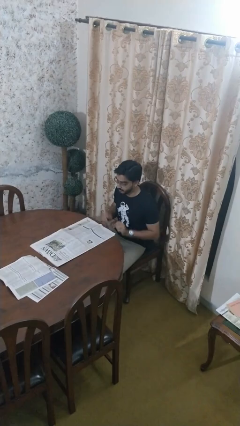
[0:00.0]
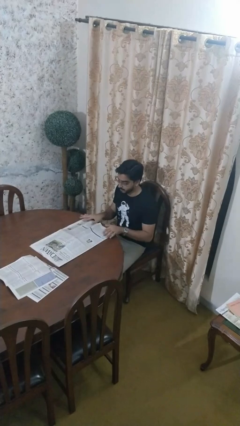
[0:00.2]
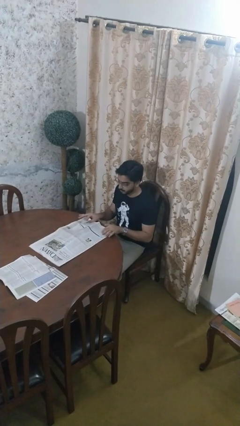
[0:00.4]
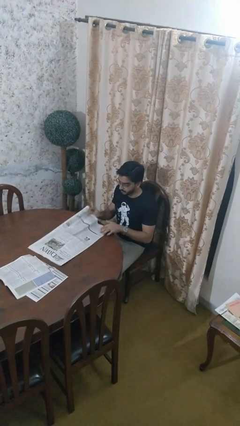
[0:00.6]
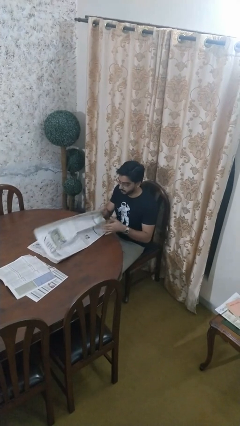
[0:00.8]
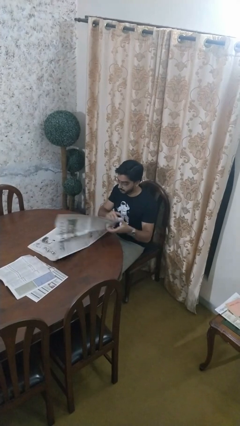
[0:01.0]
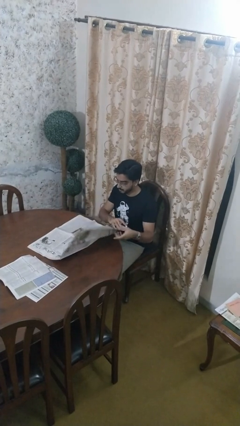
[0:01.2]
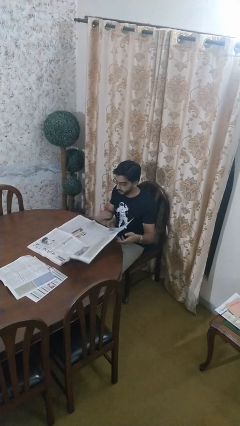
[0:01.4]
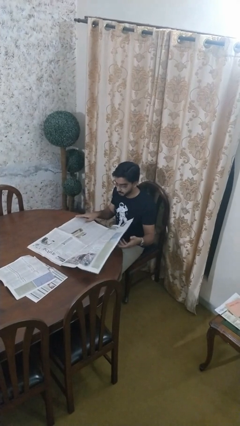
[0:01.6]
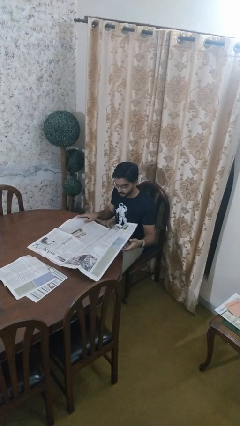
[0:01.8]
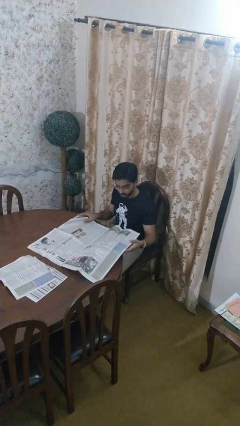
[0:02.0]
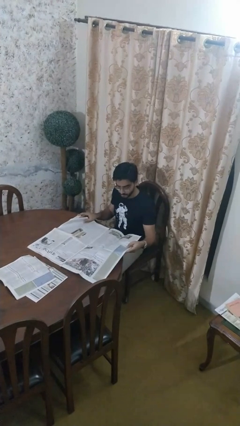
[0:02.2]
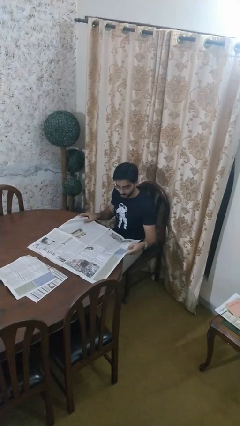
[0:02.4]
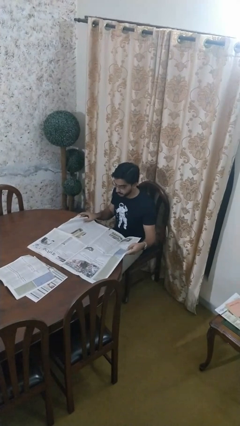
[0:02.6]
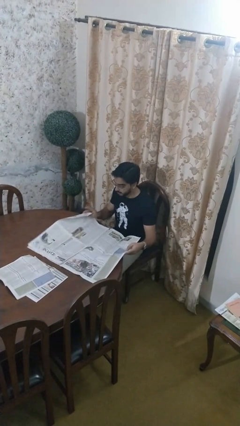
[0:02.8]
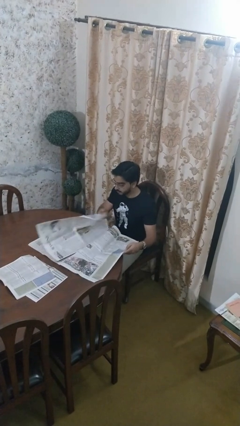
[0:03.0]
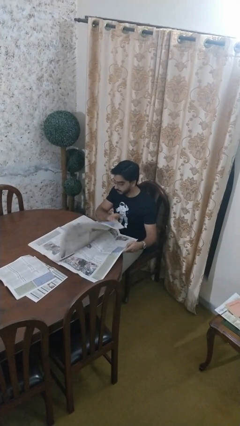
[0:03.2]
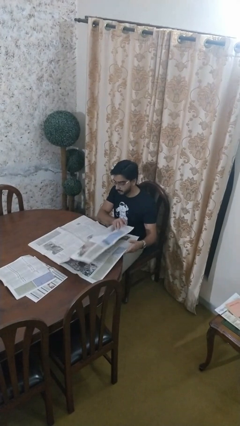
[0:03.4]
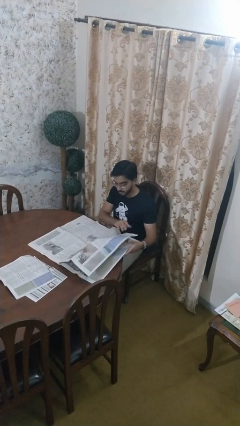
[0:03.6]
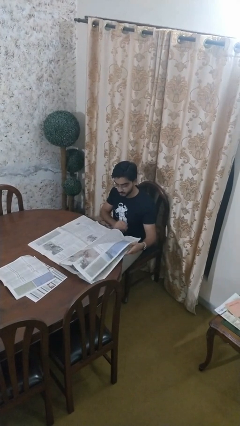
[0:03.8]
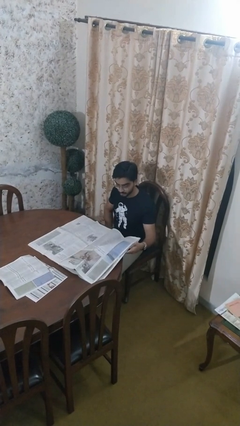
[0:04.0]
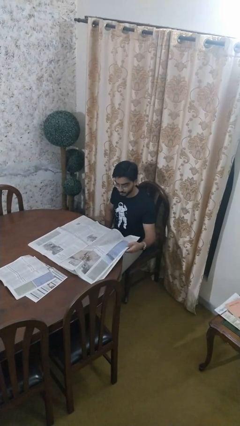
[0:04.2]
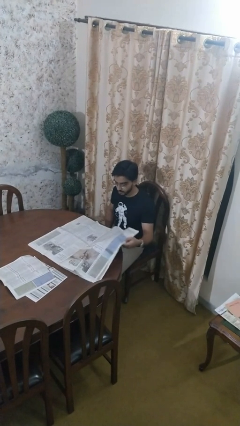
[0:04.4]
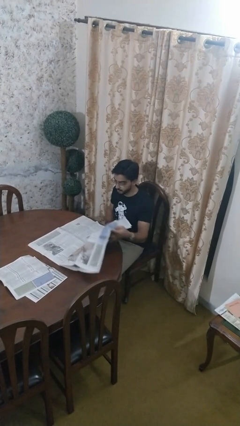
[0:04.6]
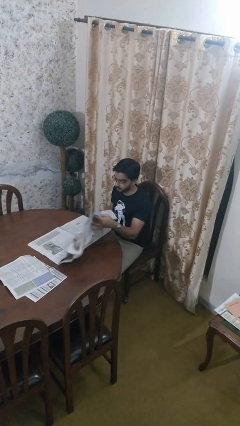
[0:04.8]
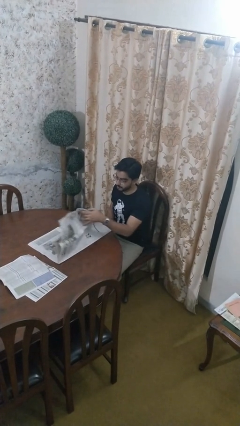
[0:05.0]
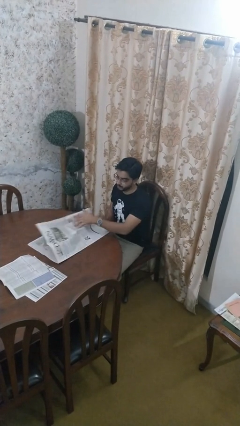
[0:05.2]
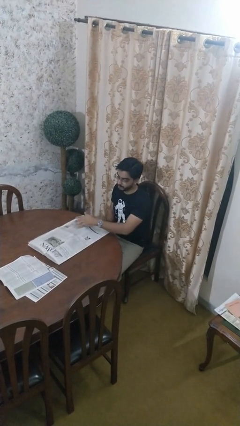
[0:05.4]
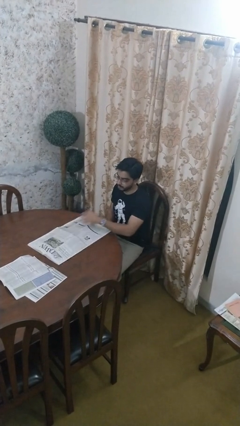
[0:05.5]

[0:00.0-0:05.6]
person reads newspaper

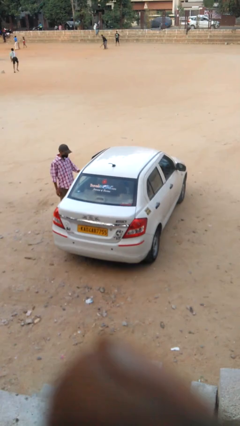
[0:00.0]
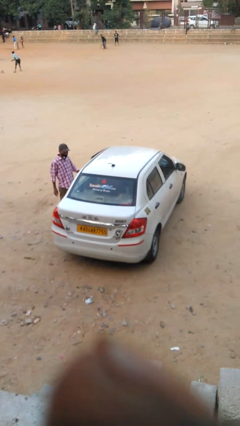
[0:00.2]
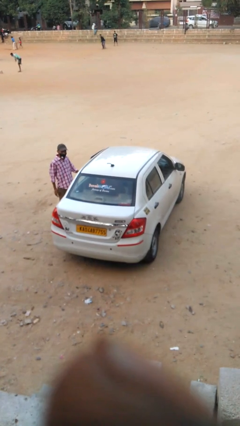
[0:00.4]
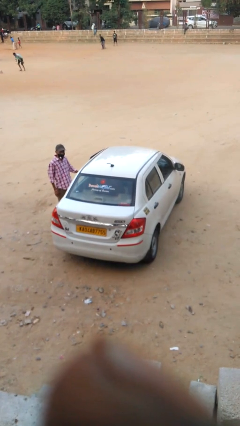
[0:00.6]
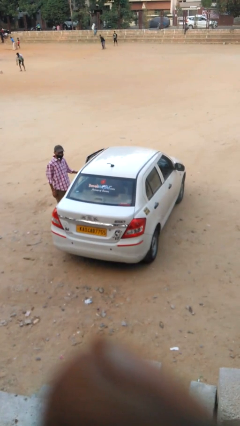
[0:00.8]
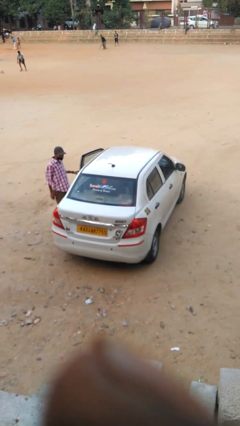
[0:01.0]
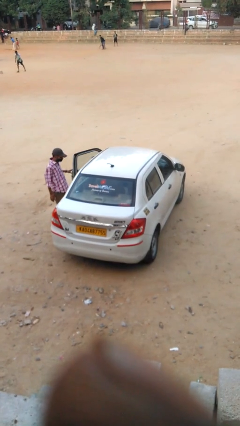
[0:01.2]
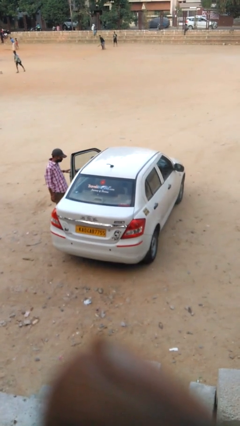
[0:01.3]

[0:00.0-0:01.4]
car picks up person

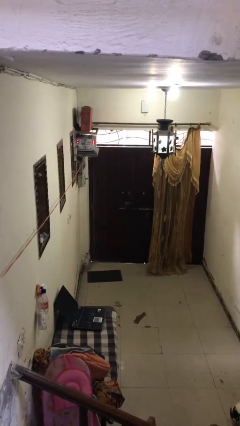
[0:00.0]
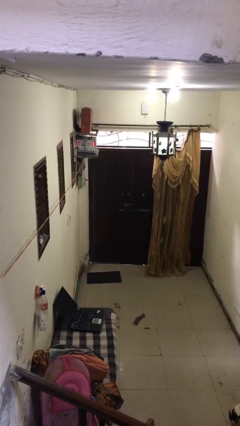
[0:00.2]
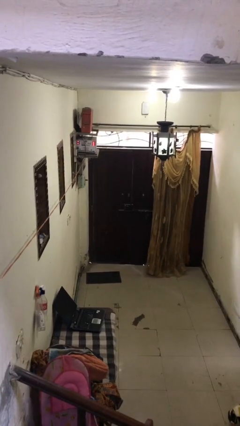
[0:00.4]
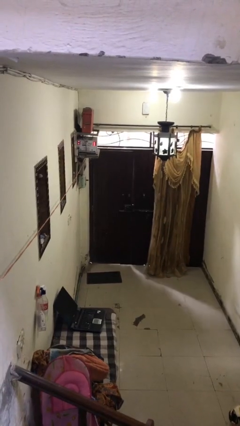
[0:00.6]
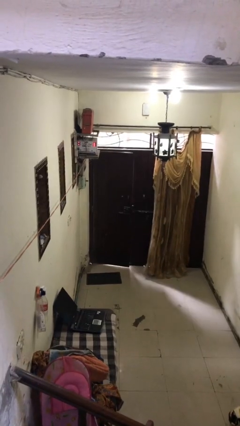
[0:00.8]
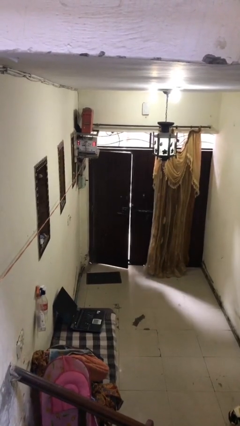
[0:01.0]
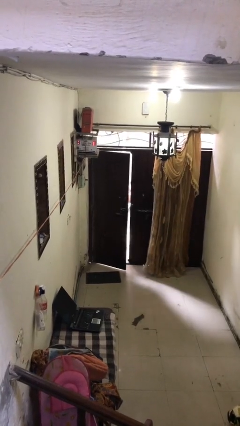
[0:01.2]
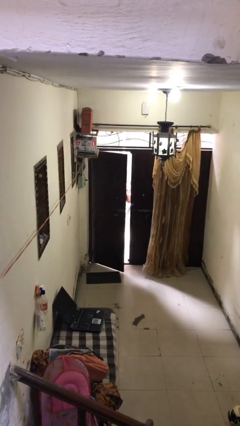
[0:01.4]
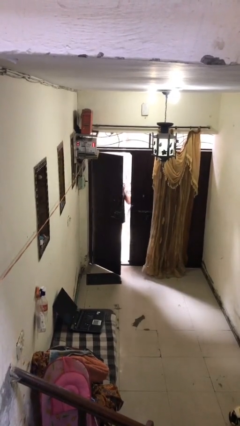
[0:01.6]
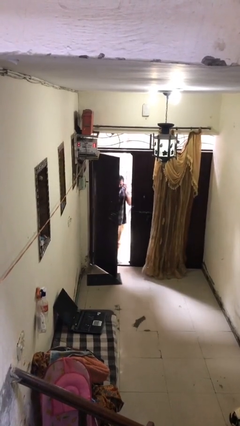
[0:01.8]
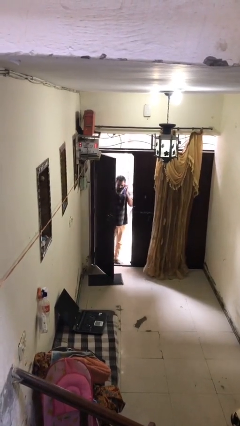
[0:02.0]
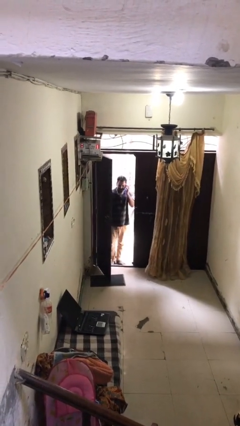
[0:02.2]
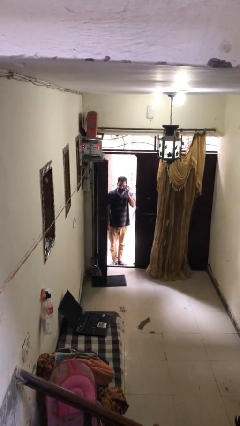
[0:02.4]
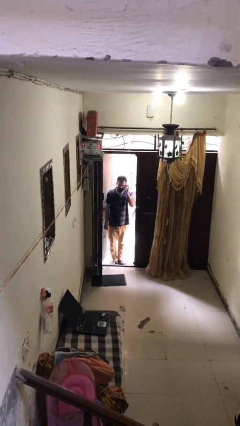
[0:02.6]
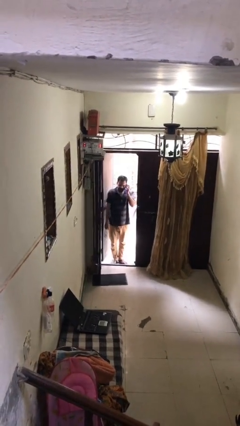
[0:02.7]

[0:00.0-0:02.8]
person opens facility door

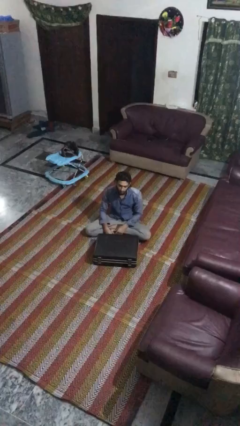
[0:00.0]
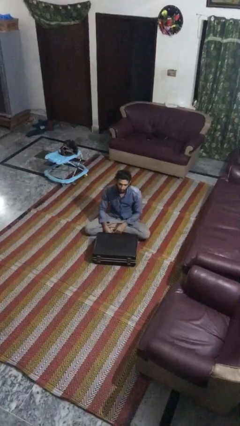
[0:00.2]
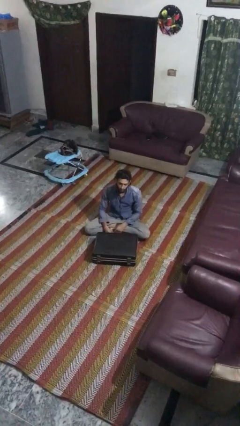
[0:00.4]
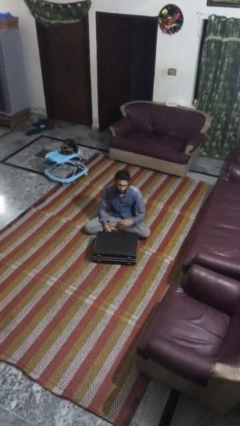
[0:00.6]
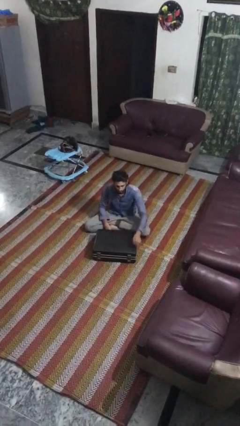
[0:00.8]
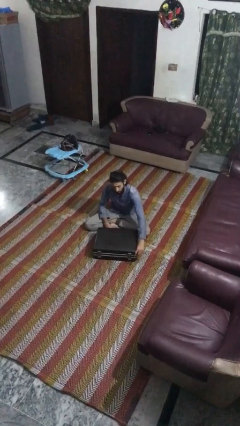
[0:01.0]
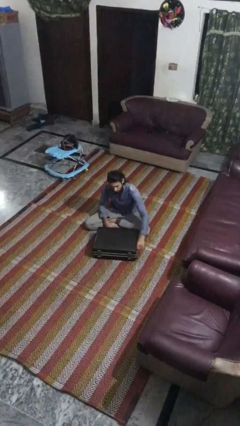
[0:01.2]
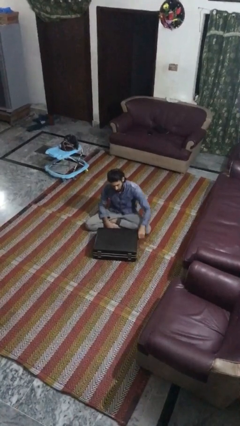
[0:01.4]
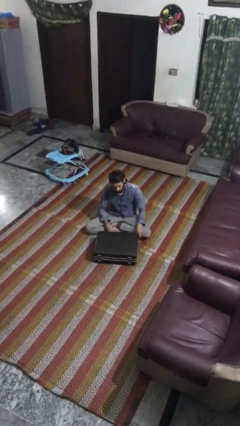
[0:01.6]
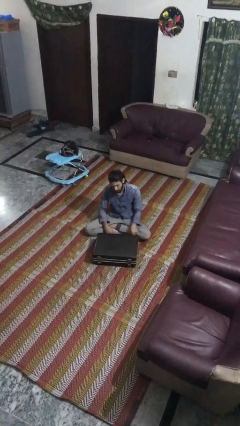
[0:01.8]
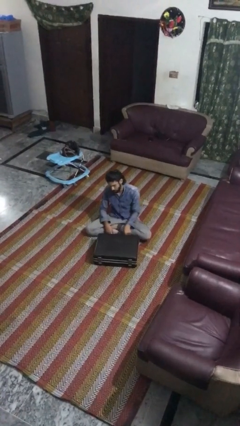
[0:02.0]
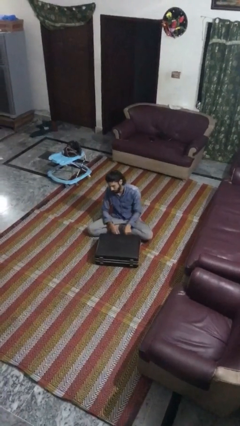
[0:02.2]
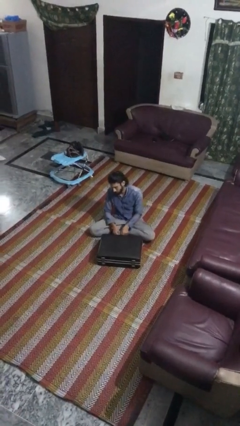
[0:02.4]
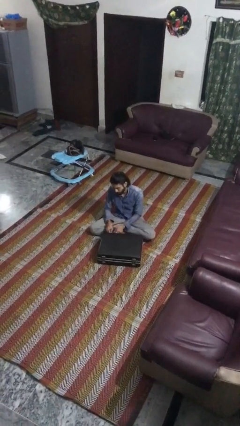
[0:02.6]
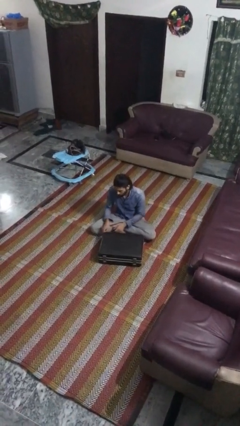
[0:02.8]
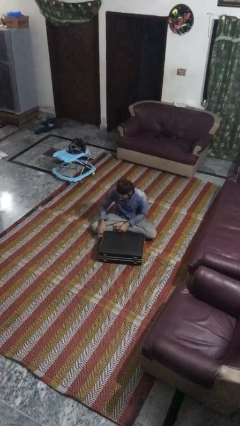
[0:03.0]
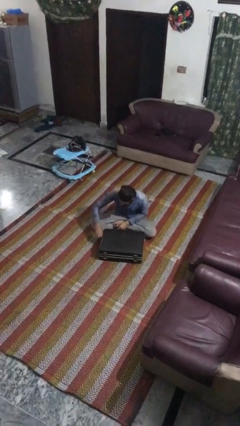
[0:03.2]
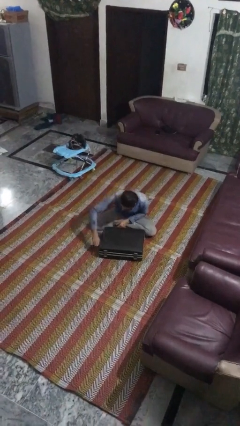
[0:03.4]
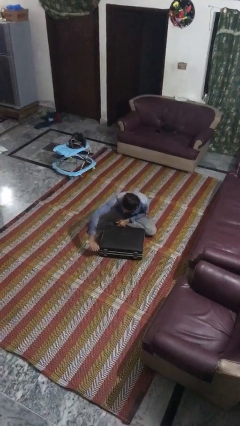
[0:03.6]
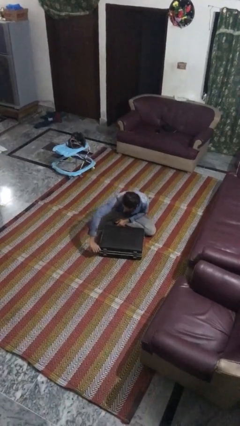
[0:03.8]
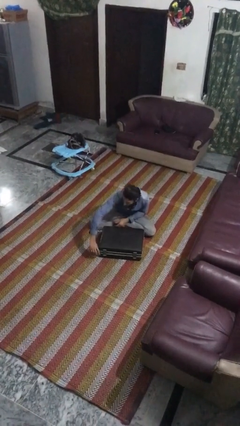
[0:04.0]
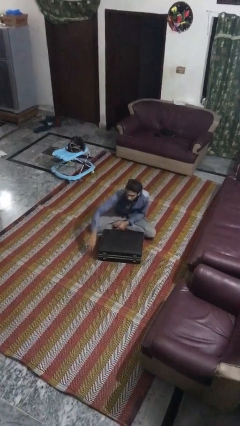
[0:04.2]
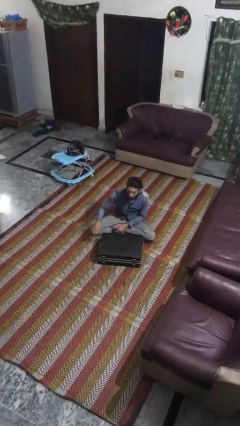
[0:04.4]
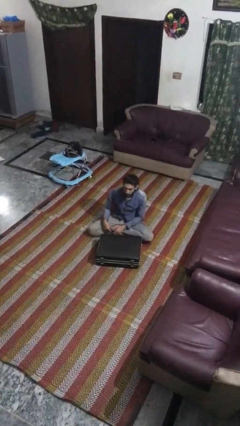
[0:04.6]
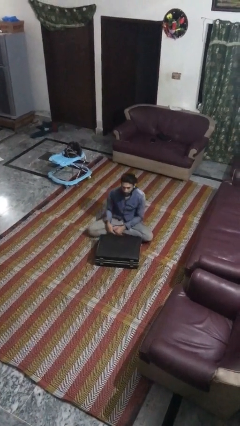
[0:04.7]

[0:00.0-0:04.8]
person closes suitcase

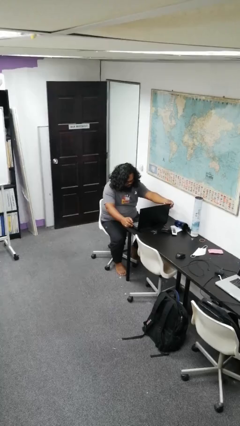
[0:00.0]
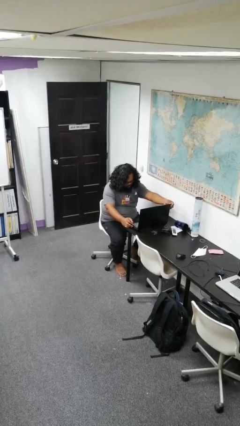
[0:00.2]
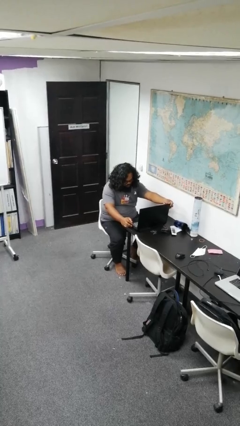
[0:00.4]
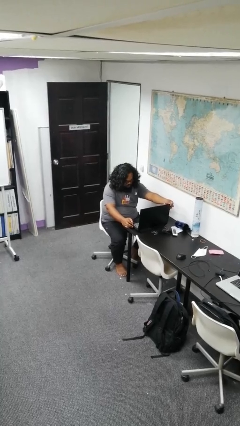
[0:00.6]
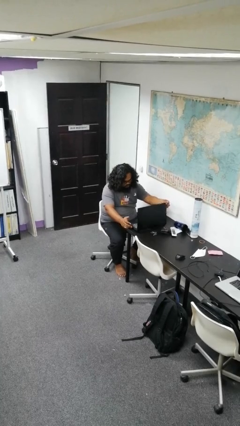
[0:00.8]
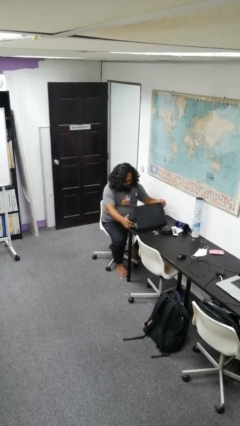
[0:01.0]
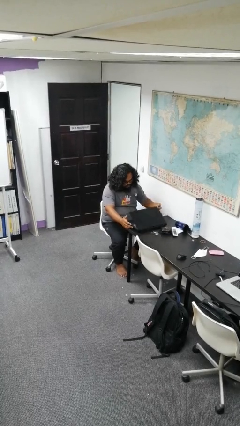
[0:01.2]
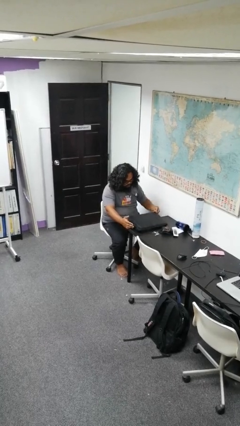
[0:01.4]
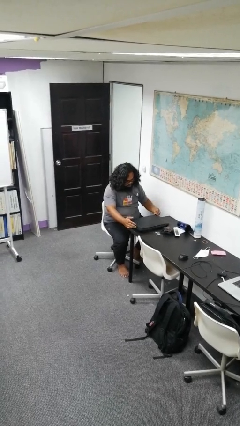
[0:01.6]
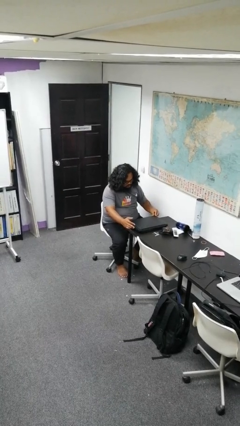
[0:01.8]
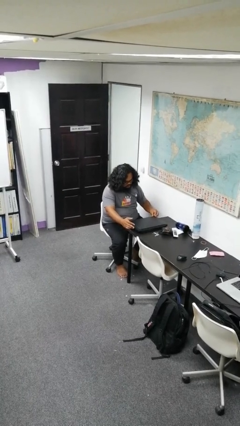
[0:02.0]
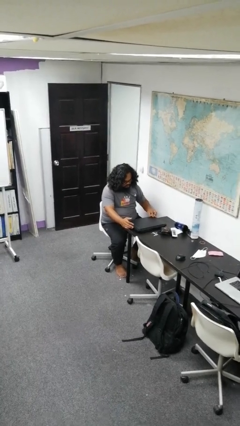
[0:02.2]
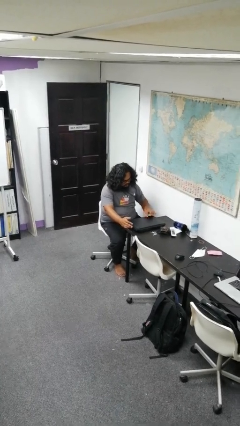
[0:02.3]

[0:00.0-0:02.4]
person closes laptop

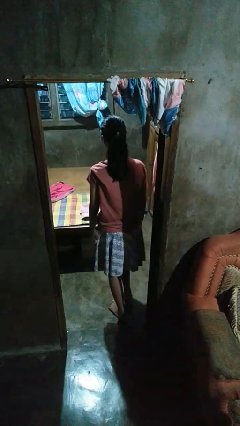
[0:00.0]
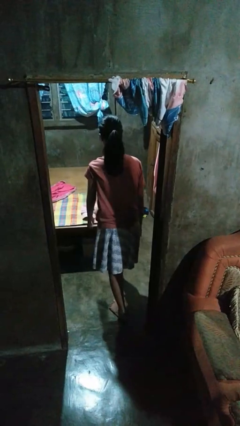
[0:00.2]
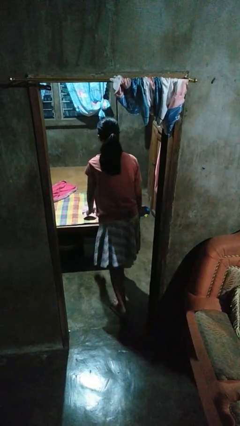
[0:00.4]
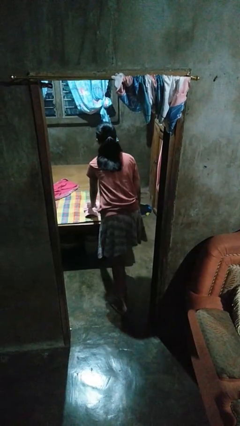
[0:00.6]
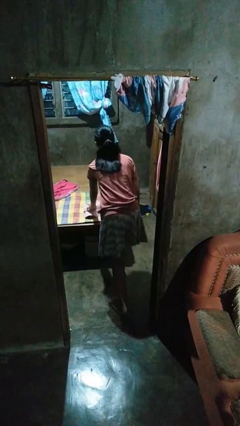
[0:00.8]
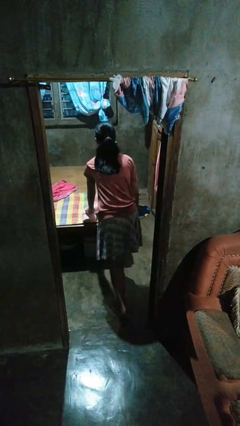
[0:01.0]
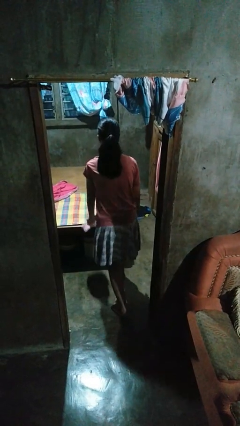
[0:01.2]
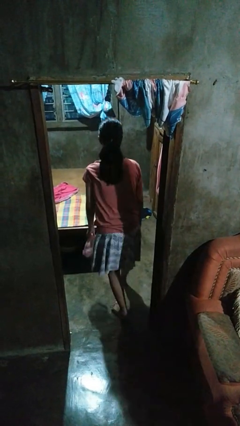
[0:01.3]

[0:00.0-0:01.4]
person picks up object from bed
